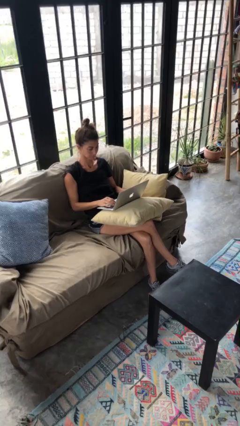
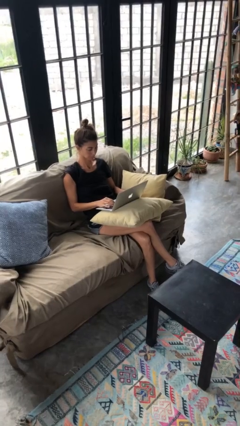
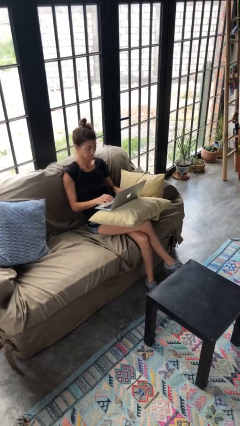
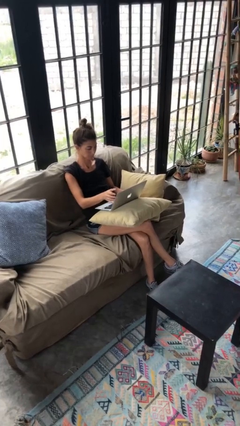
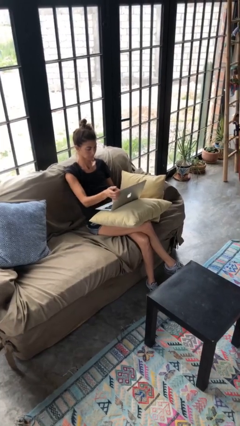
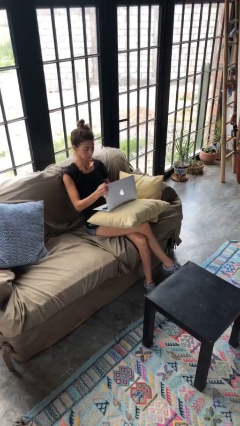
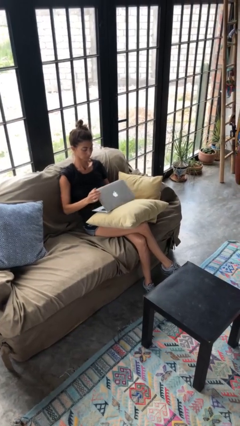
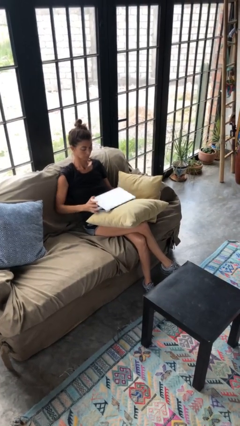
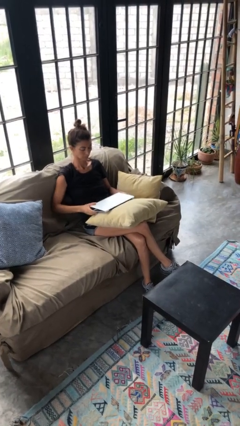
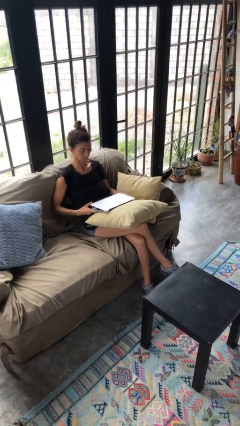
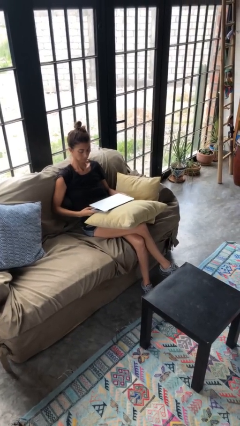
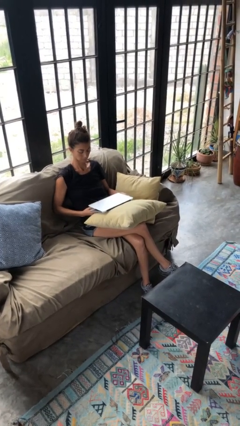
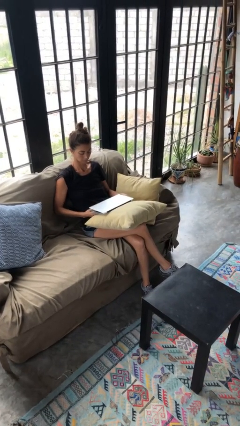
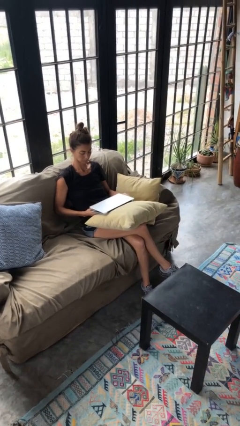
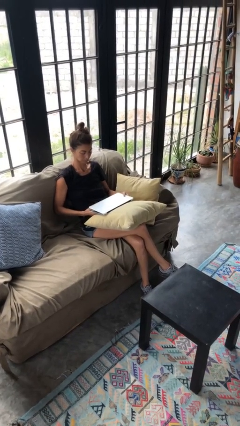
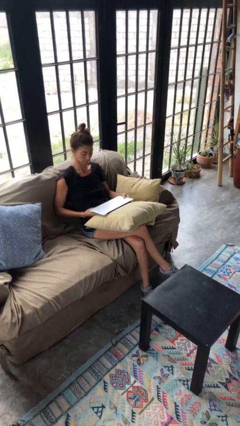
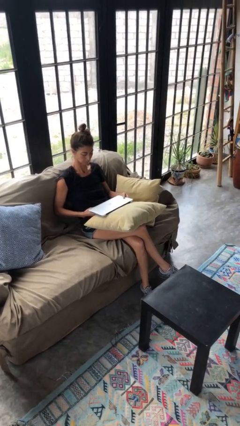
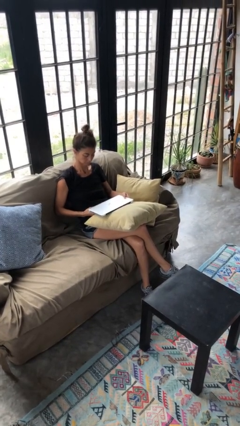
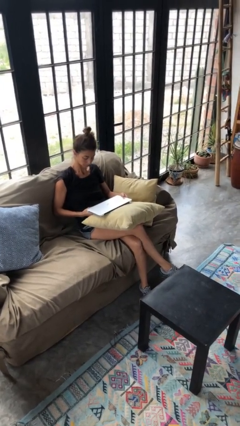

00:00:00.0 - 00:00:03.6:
person closes laptop

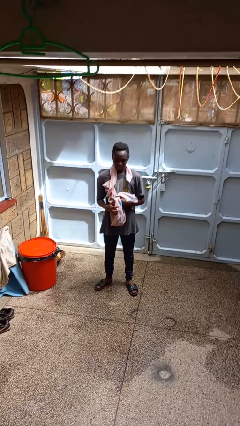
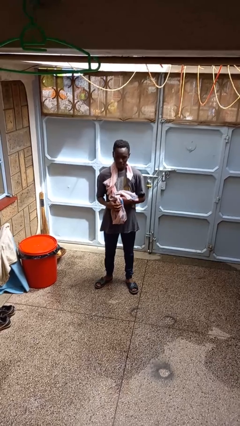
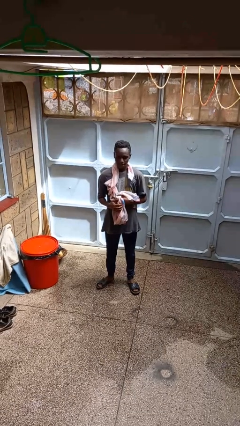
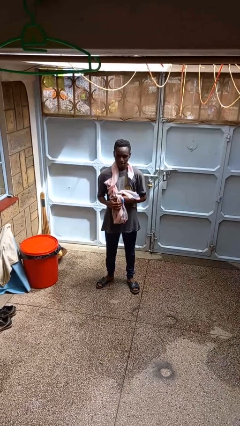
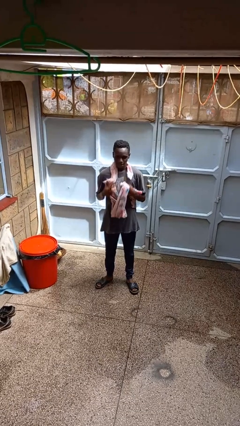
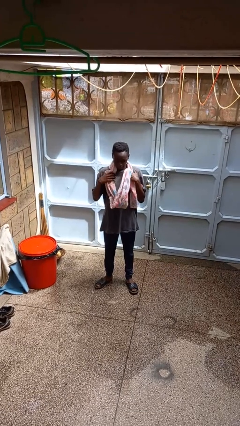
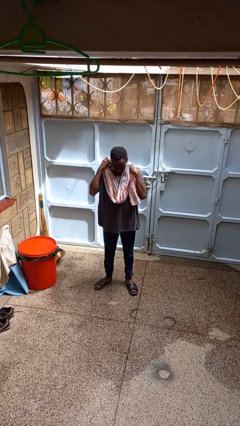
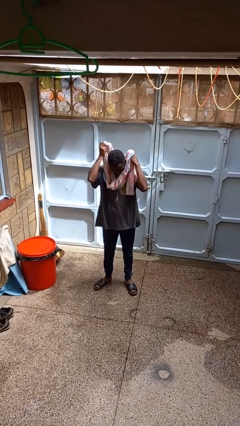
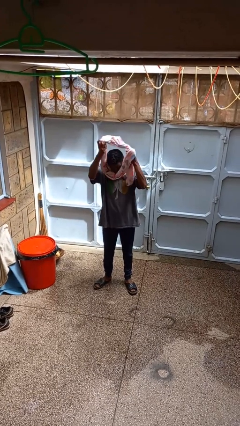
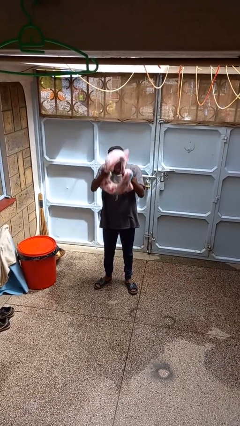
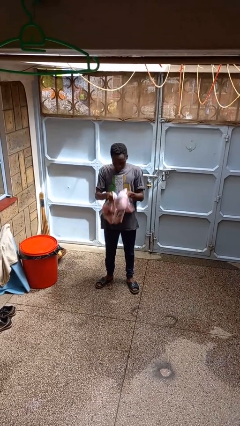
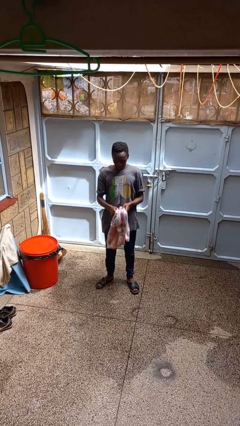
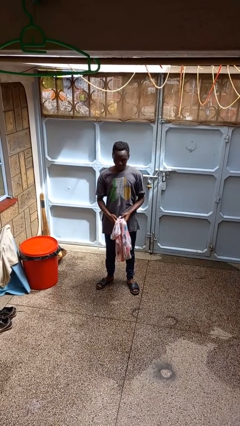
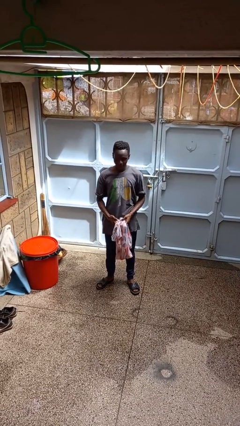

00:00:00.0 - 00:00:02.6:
person takes off scarf

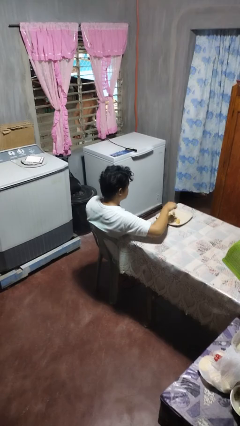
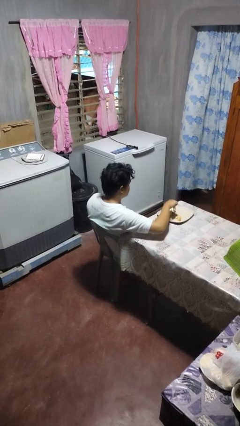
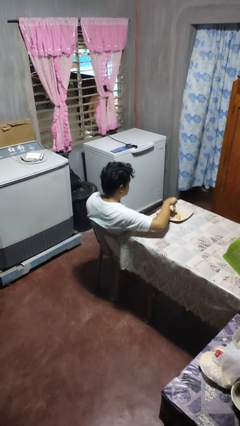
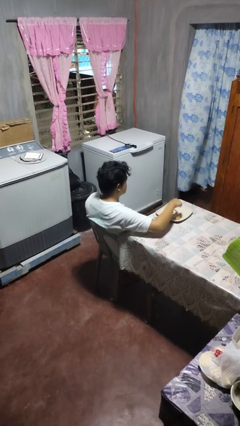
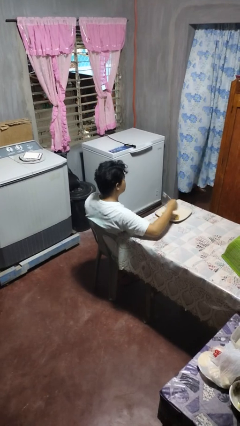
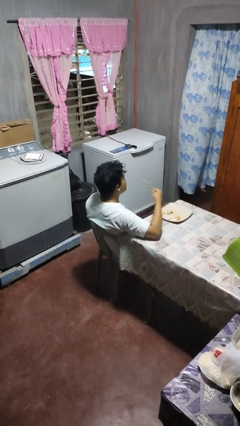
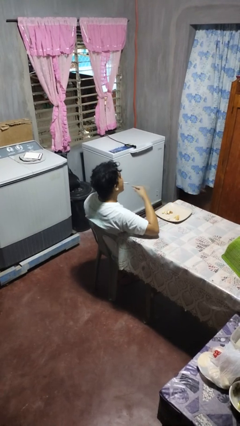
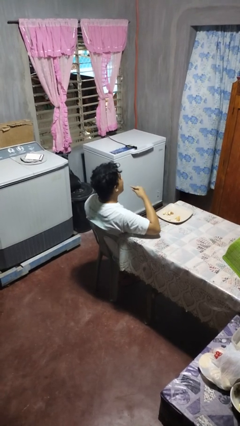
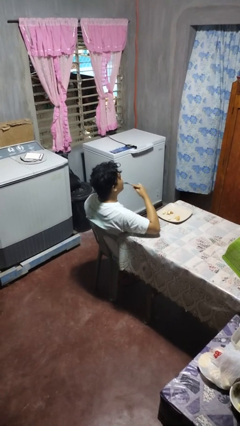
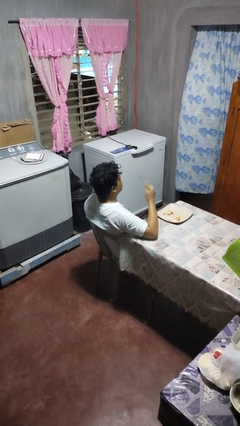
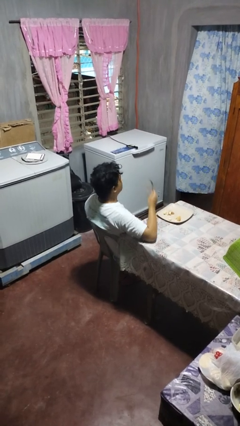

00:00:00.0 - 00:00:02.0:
person eats with utensil

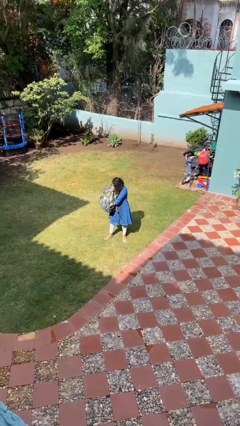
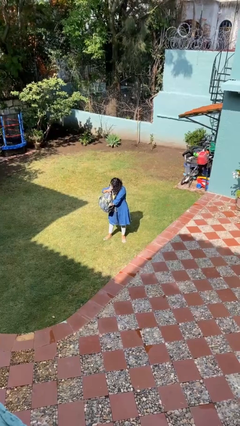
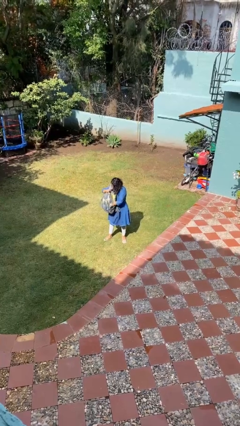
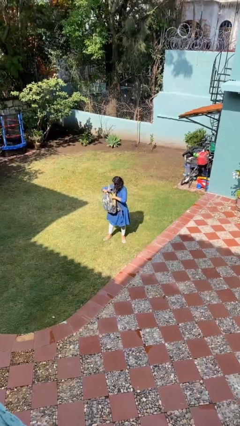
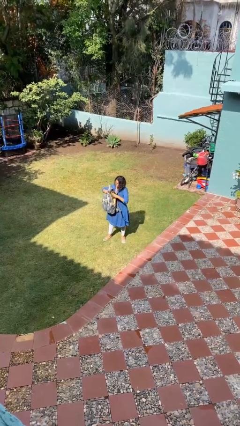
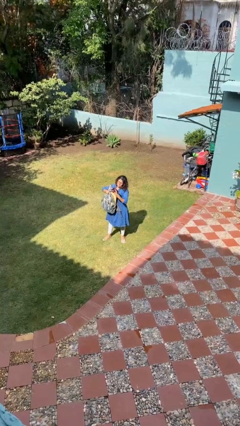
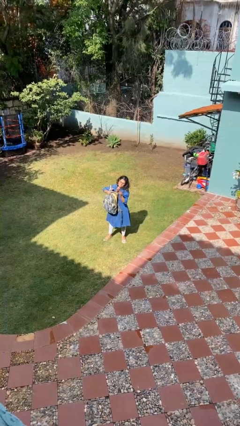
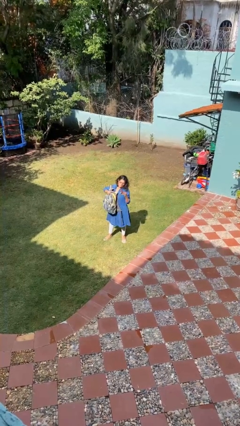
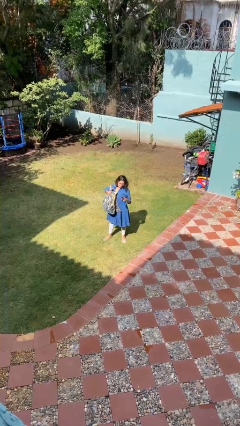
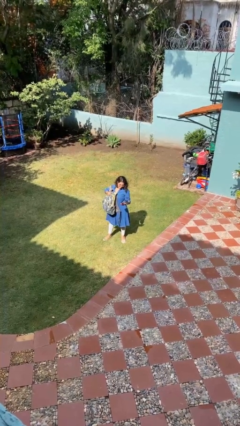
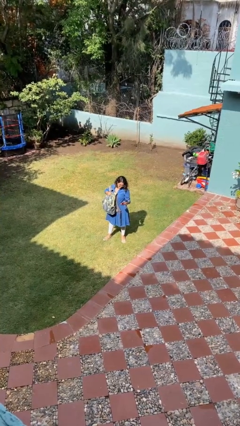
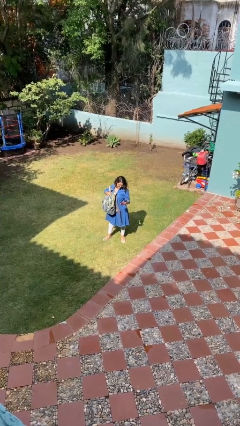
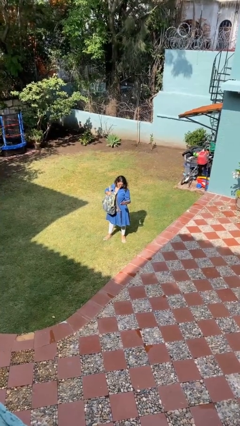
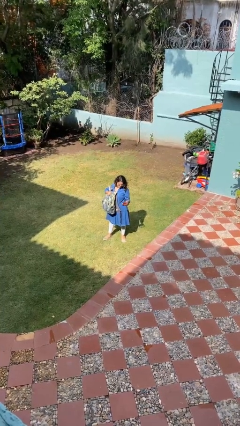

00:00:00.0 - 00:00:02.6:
person takes object from backpack

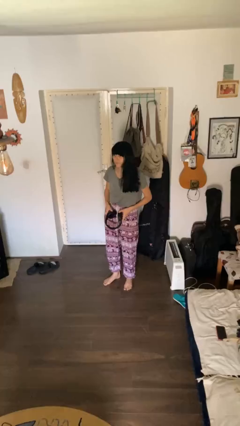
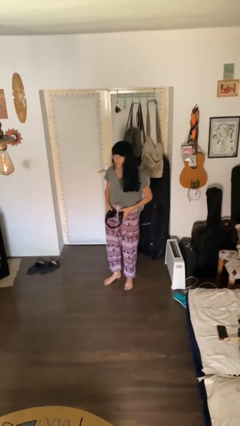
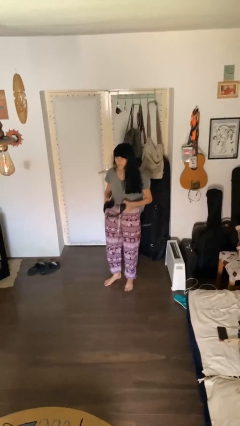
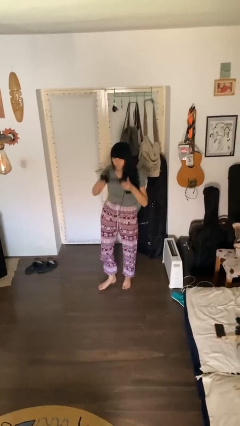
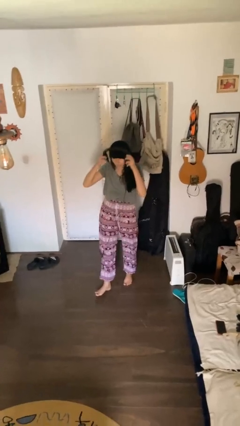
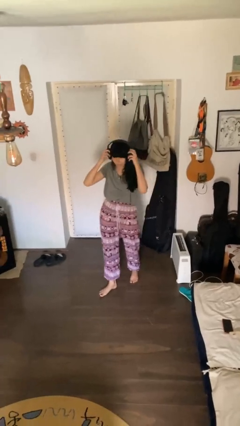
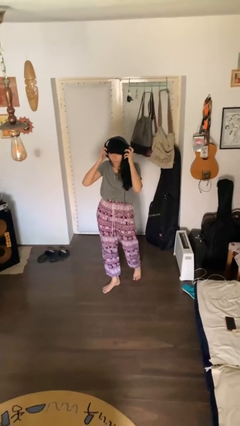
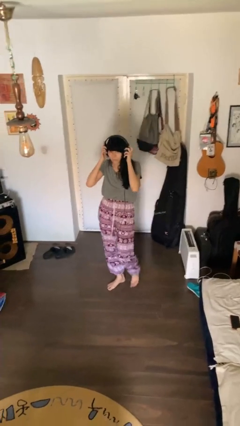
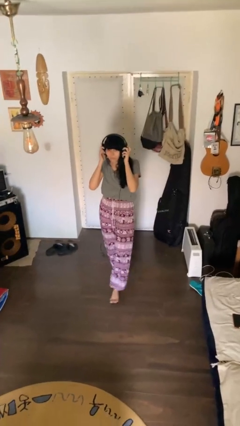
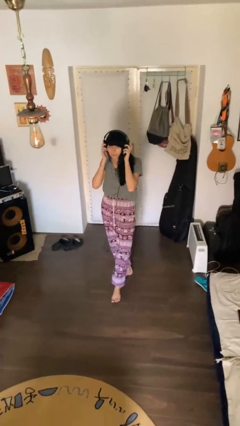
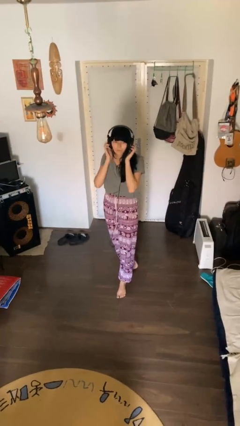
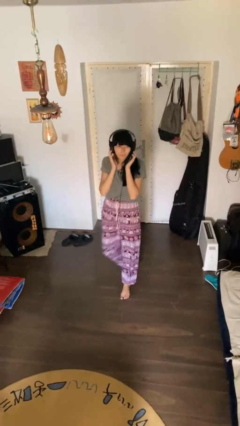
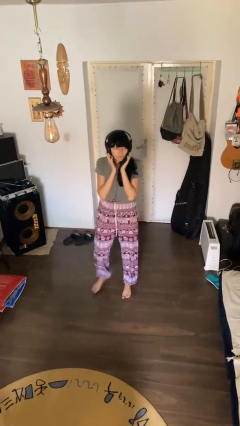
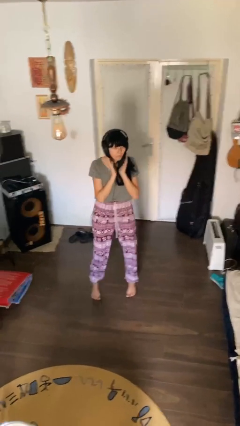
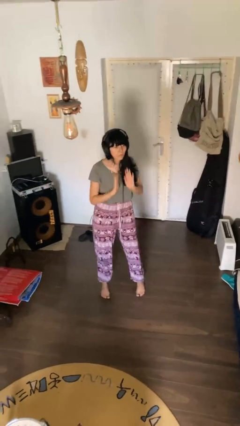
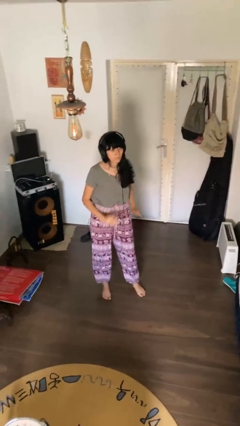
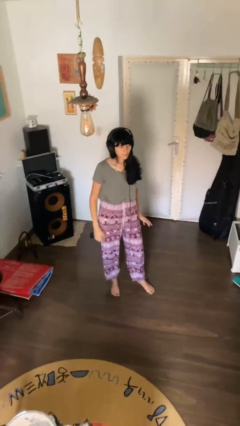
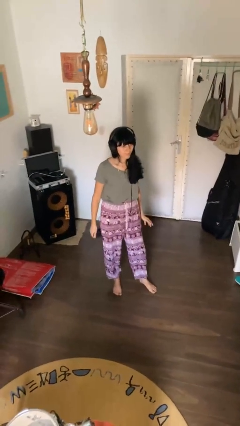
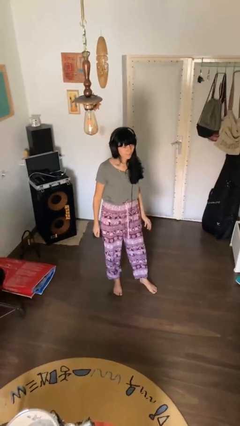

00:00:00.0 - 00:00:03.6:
person puts on headphones

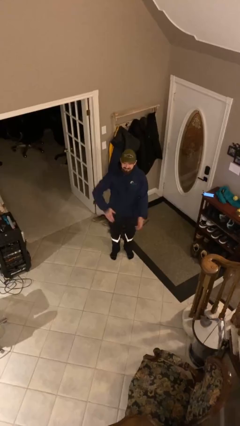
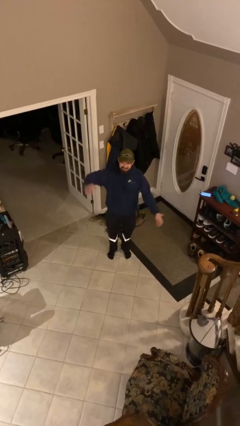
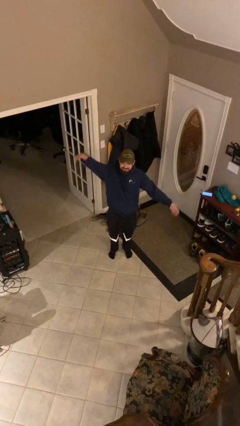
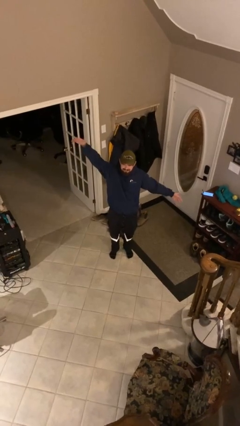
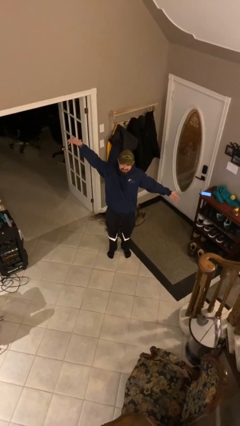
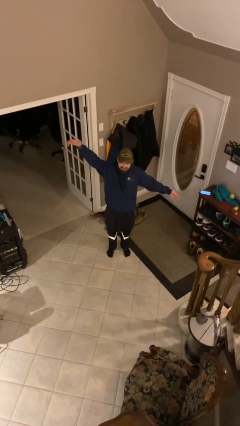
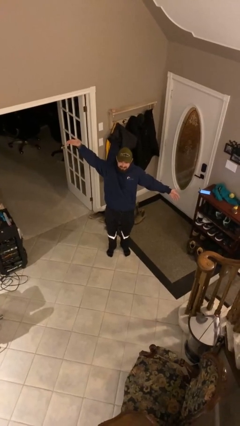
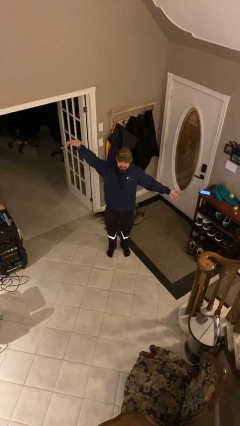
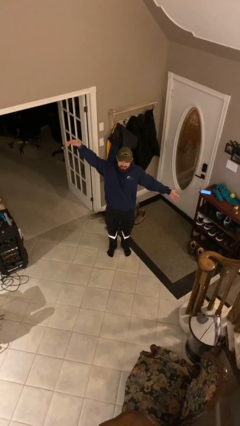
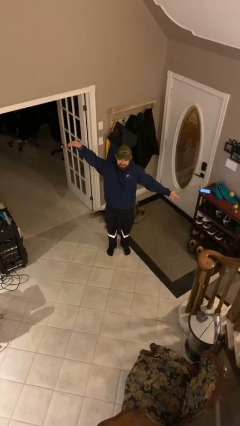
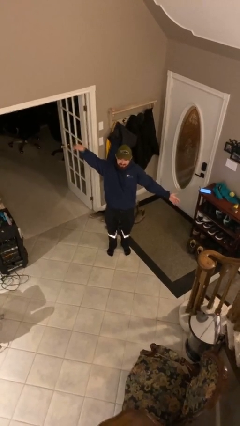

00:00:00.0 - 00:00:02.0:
person gestures zoom in

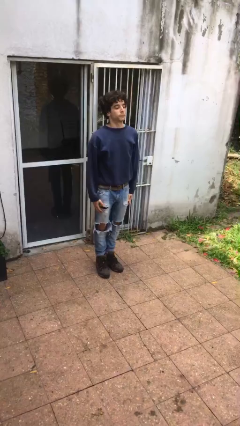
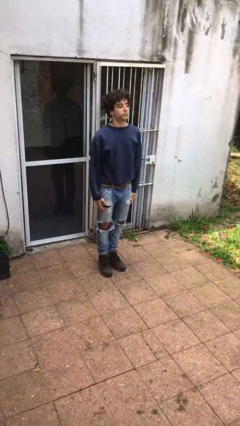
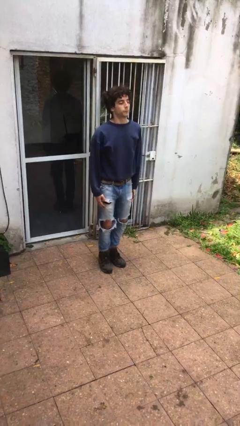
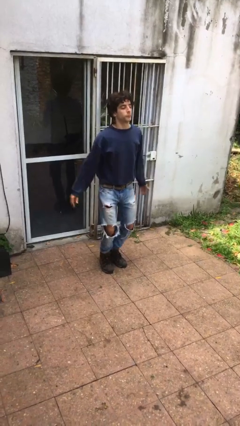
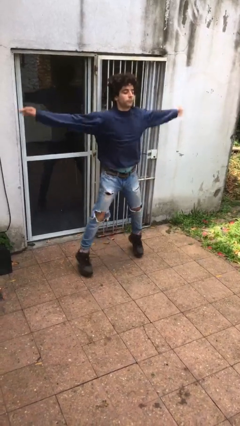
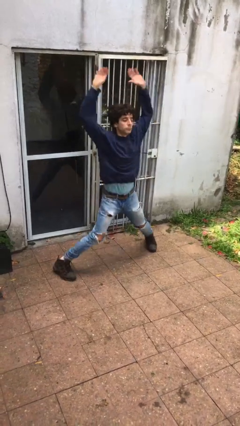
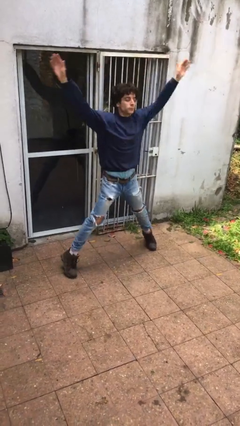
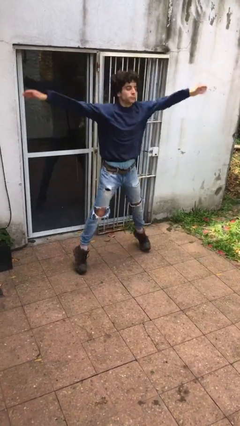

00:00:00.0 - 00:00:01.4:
person exercises with jumping jacks
